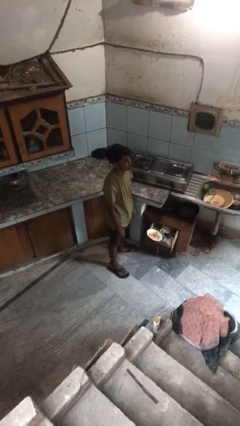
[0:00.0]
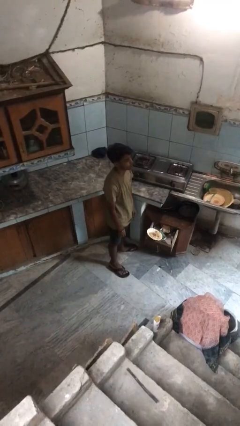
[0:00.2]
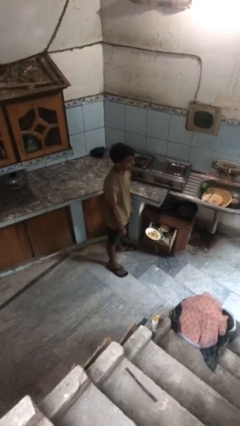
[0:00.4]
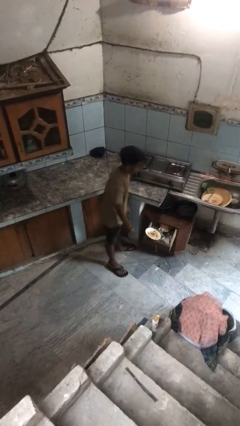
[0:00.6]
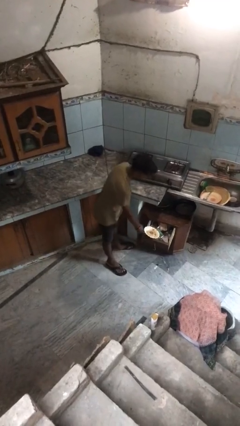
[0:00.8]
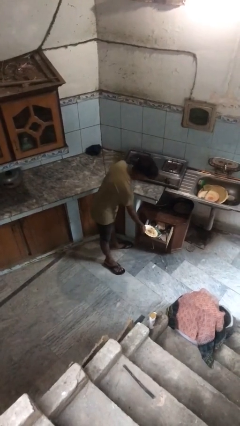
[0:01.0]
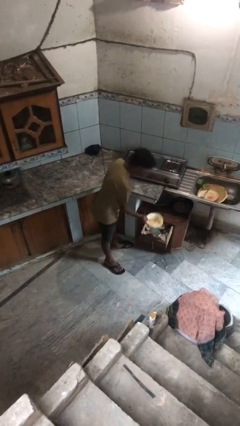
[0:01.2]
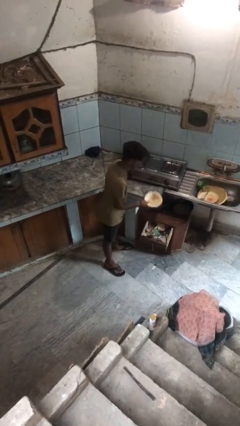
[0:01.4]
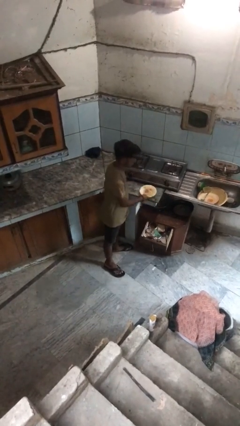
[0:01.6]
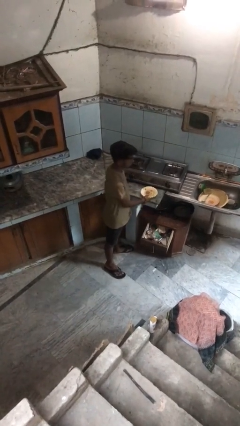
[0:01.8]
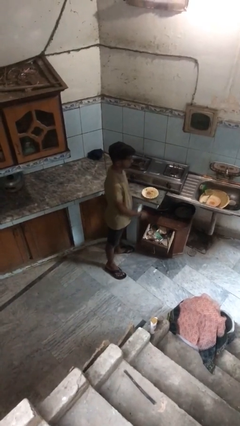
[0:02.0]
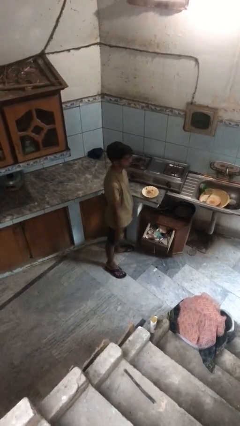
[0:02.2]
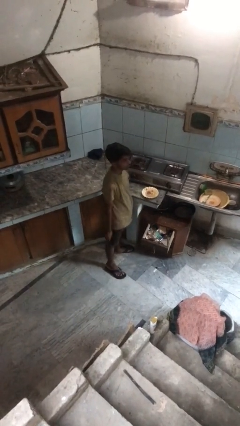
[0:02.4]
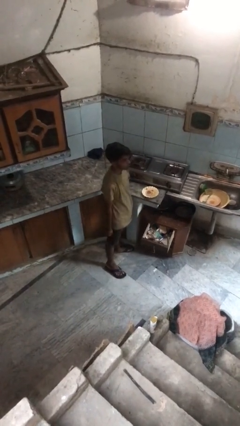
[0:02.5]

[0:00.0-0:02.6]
person takes object from kitchen drawer

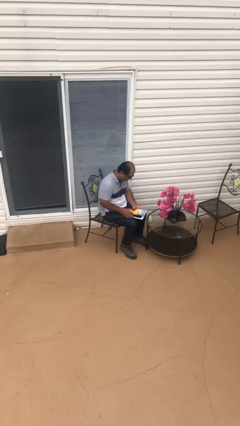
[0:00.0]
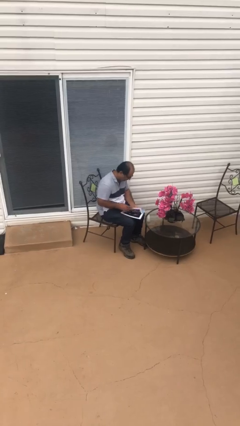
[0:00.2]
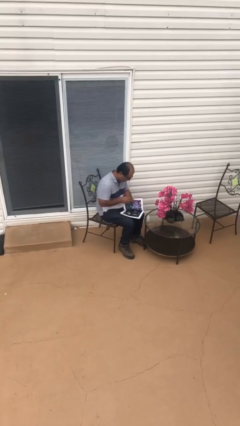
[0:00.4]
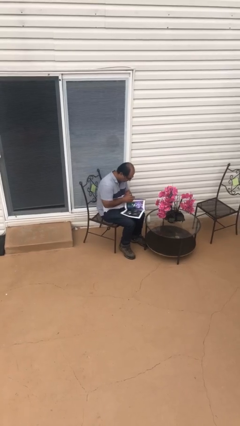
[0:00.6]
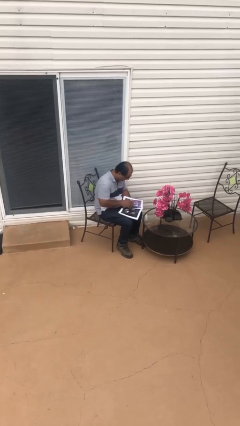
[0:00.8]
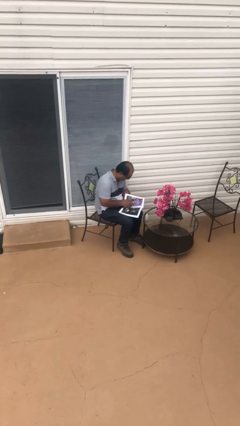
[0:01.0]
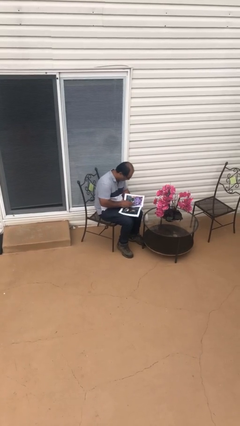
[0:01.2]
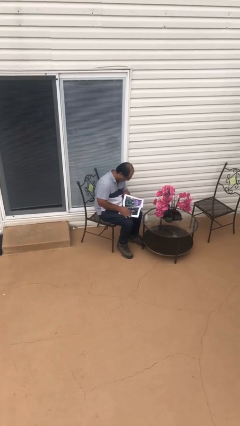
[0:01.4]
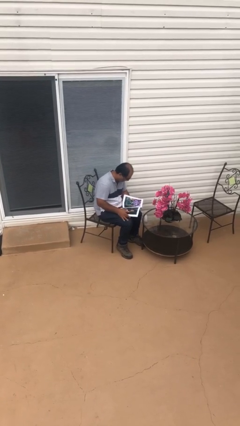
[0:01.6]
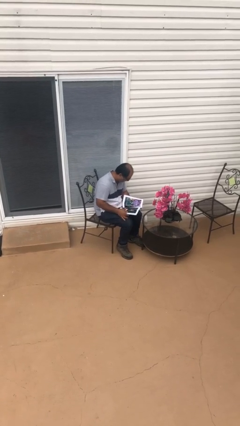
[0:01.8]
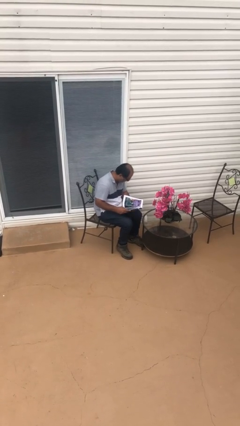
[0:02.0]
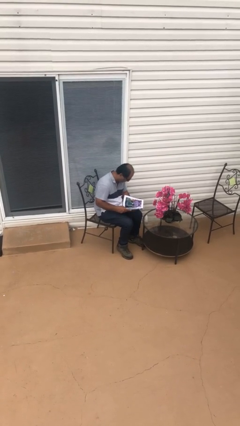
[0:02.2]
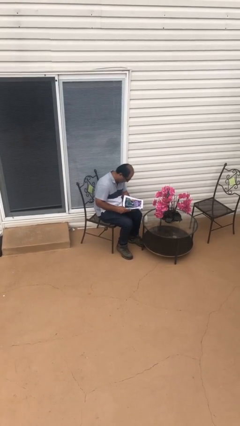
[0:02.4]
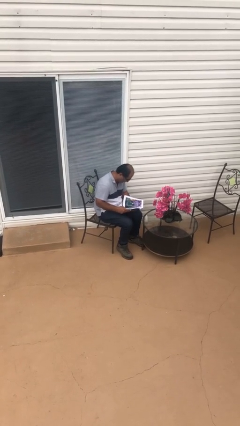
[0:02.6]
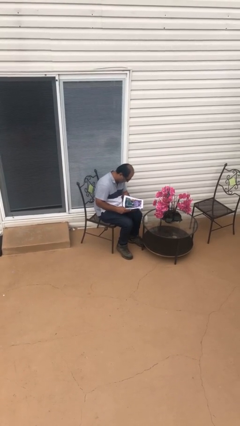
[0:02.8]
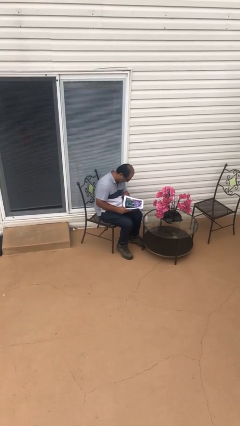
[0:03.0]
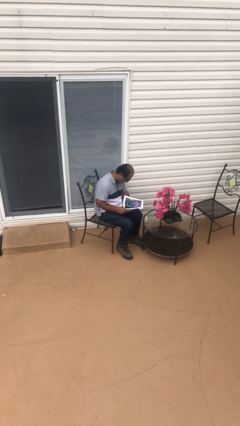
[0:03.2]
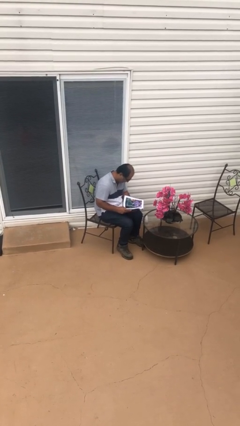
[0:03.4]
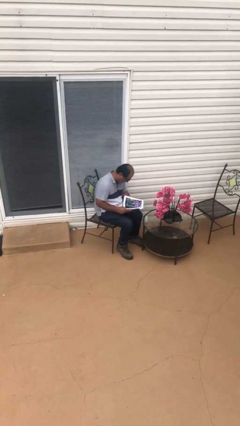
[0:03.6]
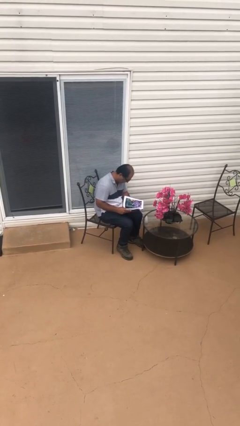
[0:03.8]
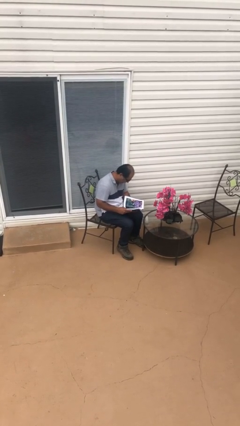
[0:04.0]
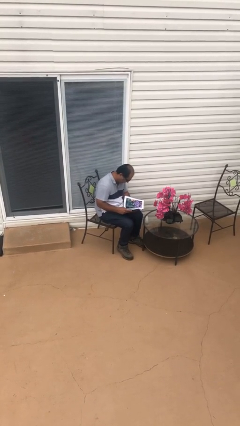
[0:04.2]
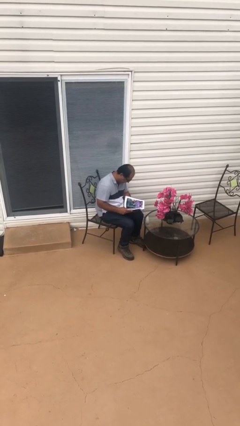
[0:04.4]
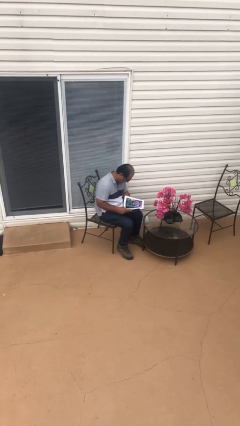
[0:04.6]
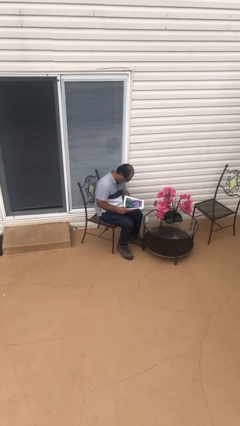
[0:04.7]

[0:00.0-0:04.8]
person reads document

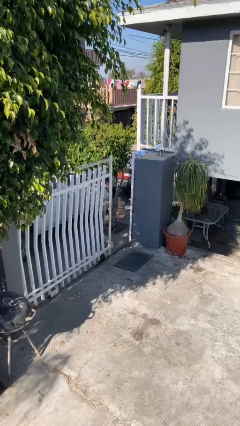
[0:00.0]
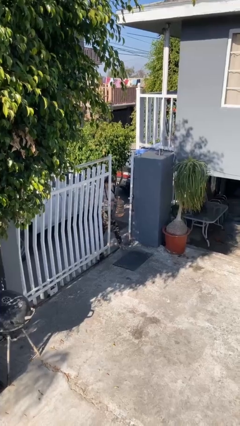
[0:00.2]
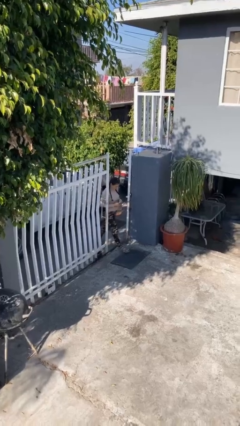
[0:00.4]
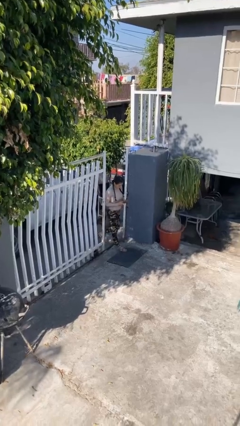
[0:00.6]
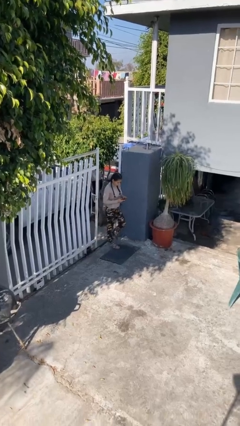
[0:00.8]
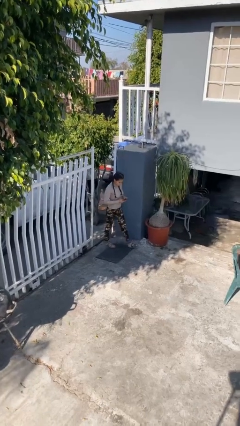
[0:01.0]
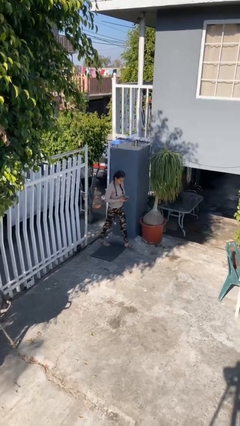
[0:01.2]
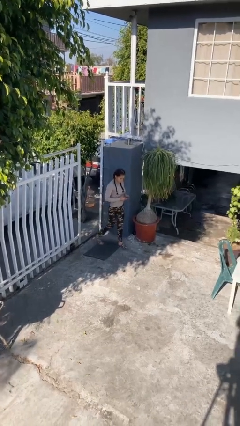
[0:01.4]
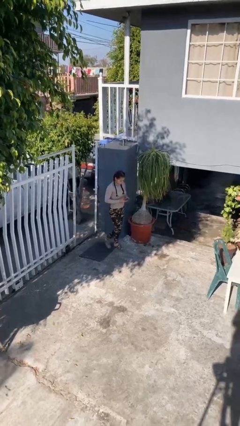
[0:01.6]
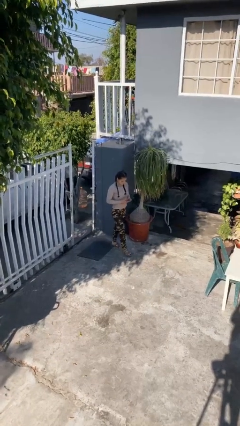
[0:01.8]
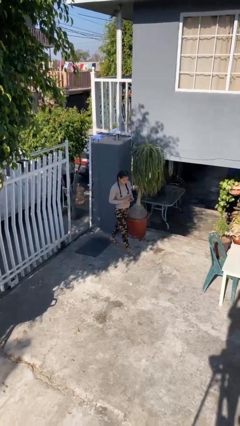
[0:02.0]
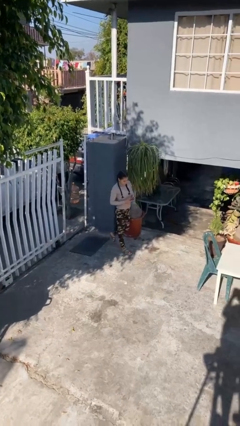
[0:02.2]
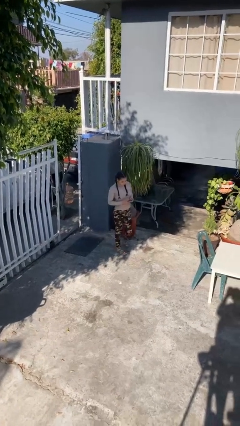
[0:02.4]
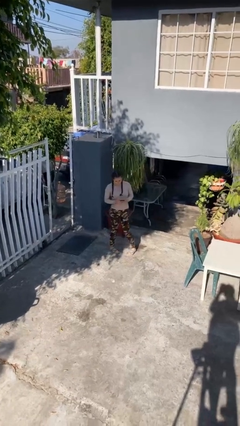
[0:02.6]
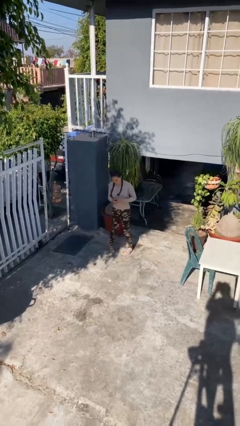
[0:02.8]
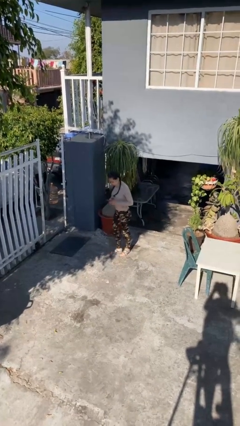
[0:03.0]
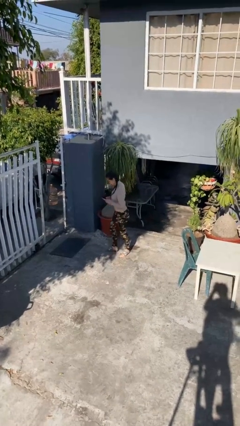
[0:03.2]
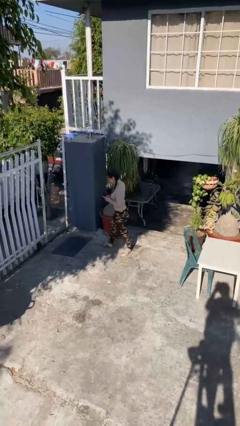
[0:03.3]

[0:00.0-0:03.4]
person enters scene through structure

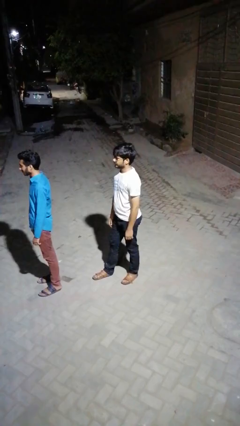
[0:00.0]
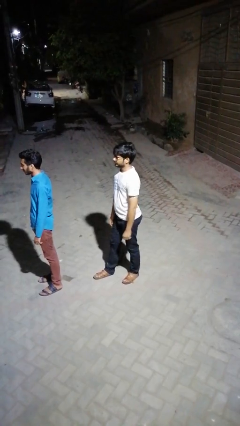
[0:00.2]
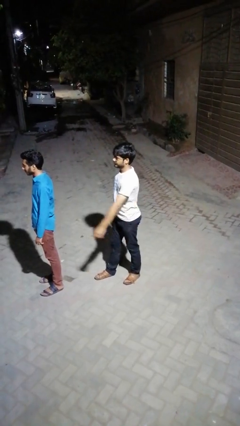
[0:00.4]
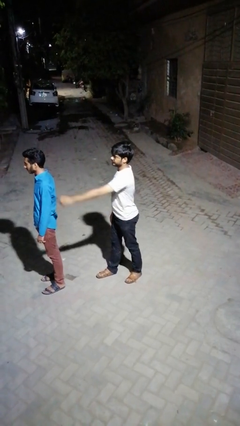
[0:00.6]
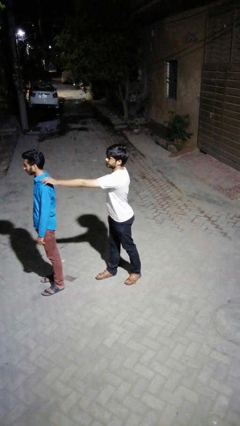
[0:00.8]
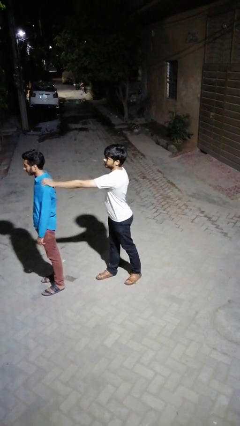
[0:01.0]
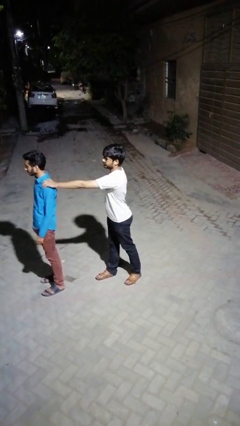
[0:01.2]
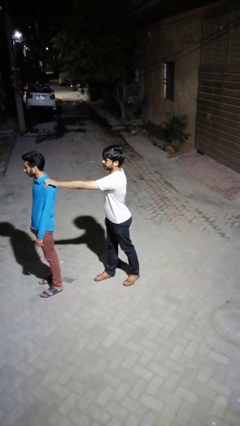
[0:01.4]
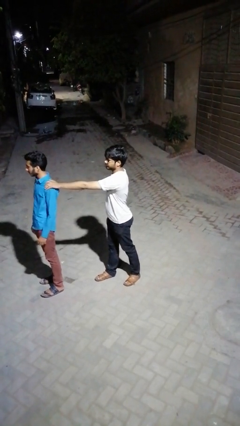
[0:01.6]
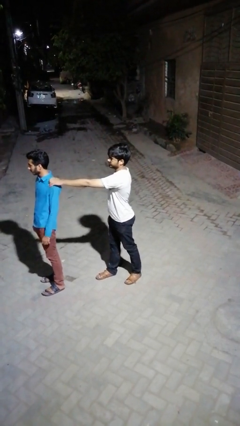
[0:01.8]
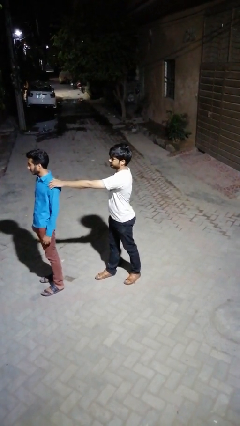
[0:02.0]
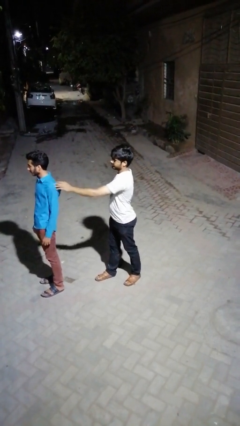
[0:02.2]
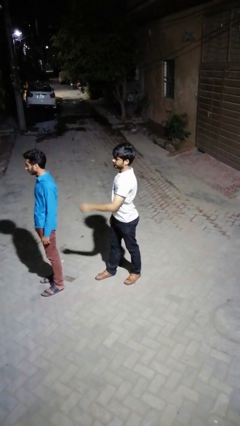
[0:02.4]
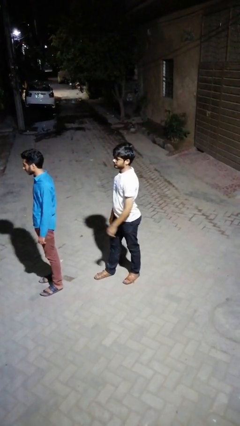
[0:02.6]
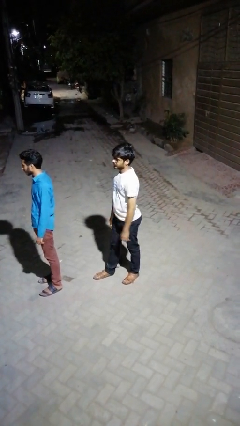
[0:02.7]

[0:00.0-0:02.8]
person touches back of person

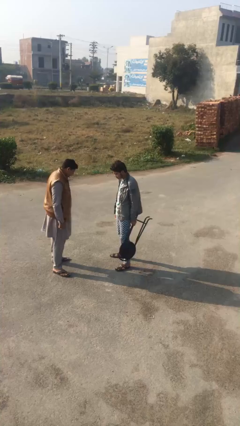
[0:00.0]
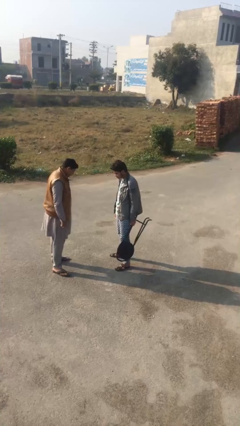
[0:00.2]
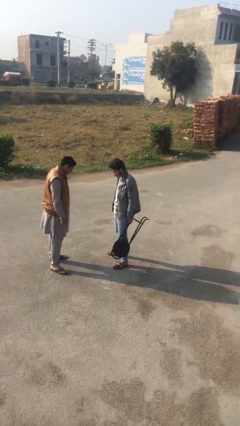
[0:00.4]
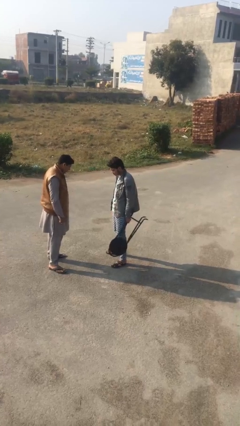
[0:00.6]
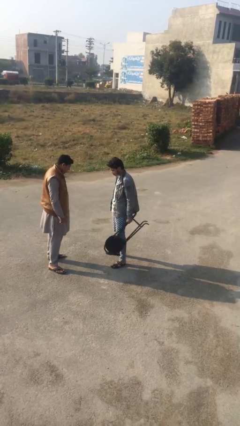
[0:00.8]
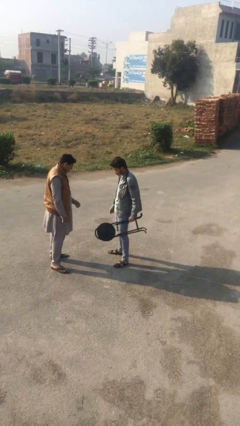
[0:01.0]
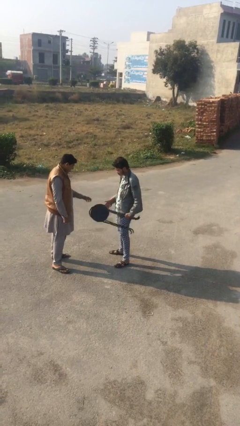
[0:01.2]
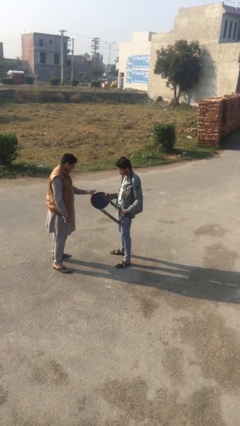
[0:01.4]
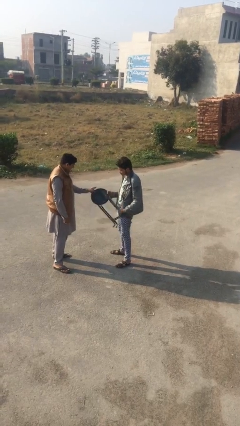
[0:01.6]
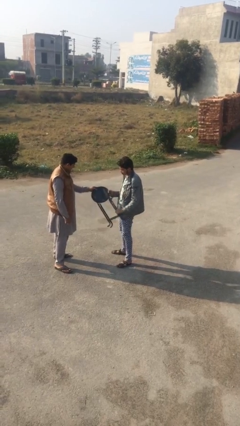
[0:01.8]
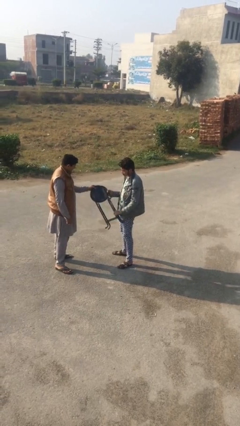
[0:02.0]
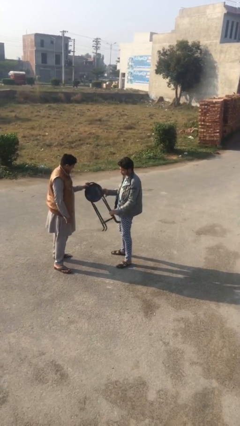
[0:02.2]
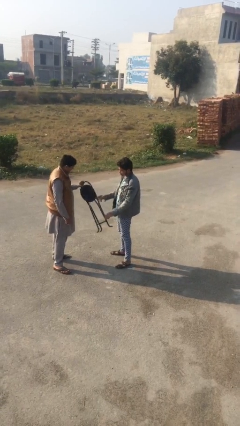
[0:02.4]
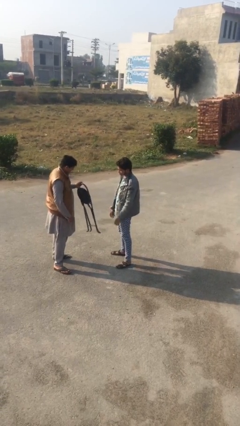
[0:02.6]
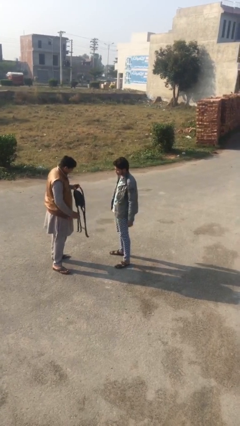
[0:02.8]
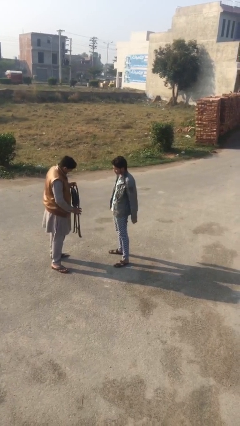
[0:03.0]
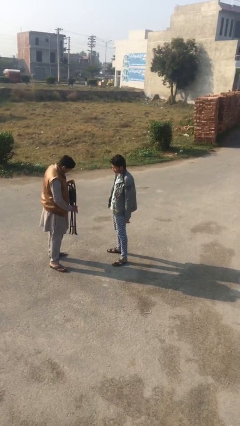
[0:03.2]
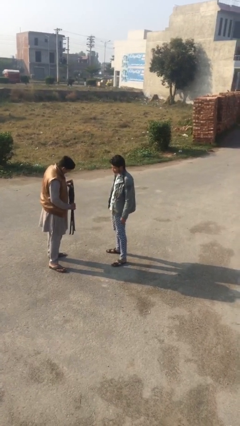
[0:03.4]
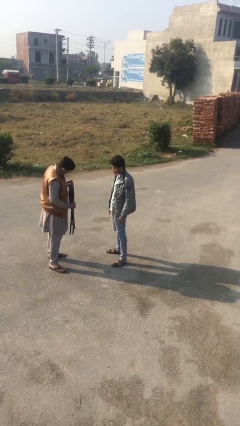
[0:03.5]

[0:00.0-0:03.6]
person transfers object to person

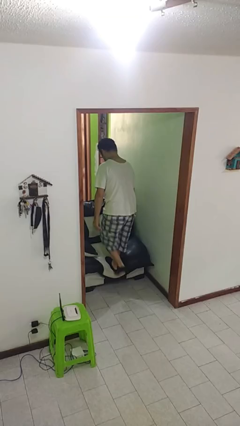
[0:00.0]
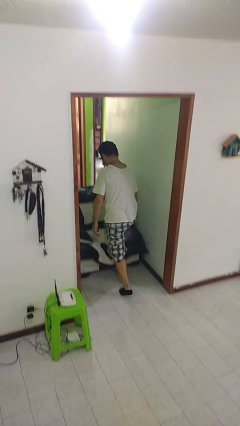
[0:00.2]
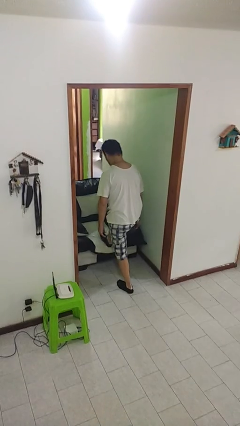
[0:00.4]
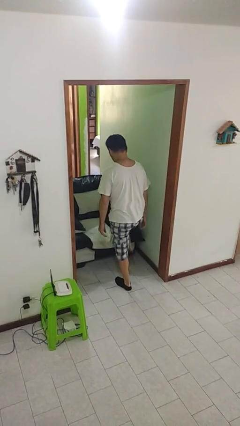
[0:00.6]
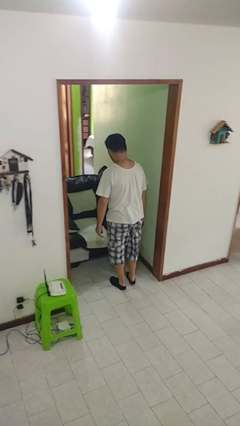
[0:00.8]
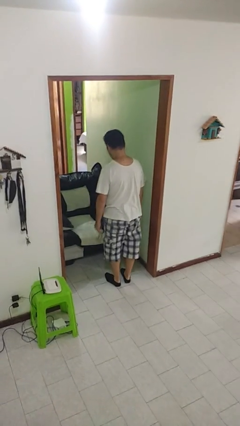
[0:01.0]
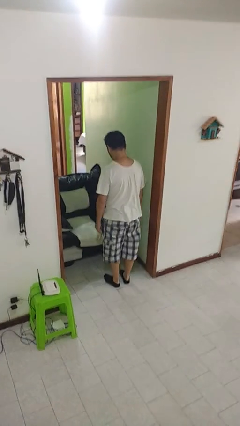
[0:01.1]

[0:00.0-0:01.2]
person climbs off couch
